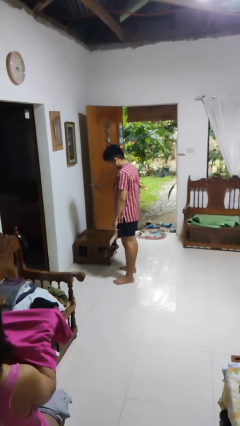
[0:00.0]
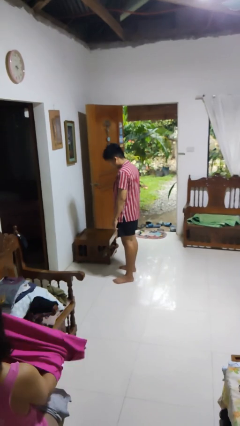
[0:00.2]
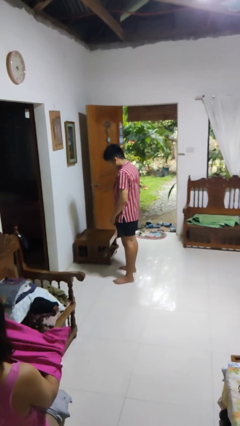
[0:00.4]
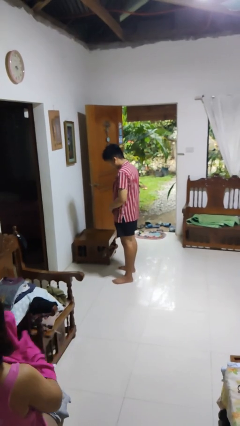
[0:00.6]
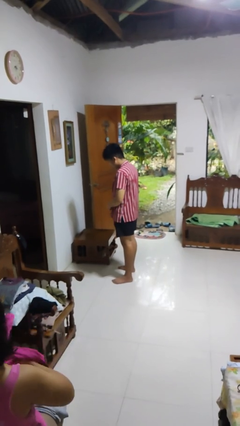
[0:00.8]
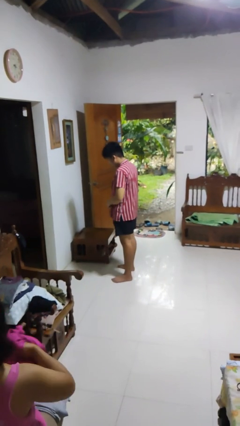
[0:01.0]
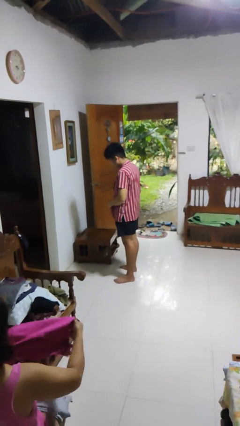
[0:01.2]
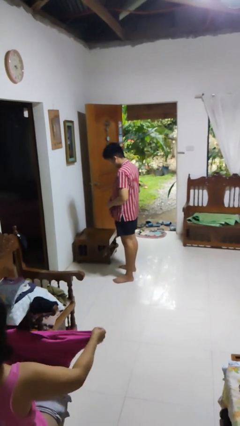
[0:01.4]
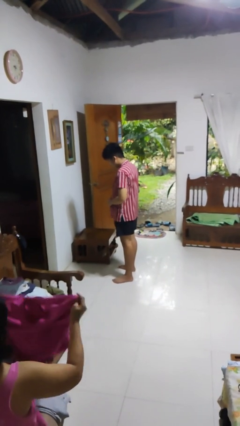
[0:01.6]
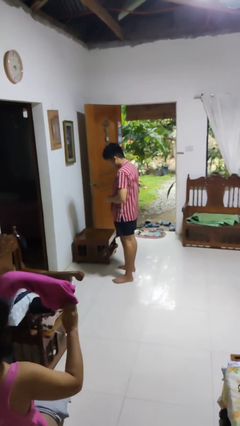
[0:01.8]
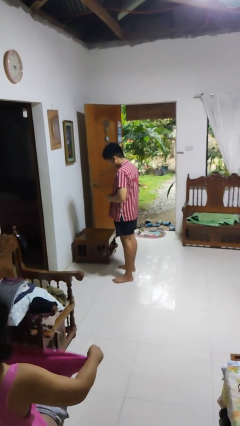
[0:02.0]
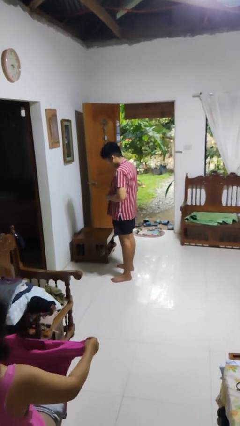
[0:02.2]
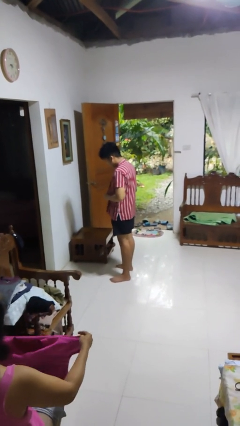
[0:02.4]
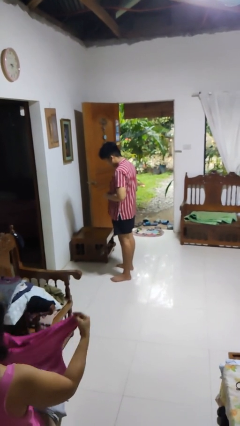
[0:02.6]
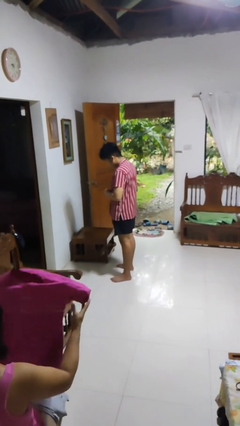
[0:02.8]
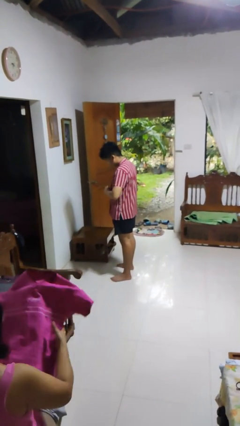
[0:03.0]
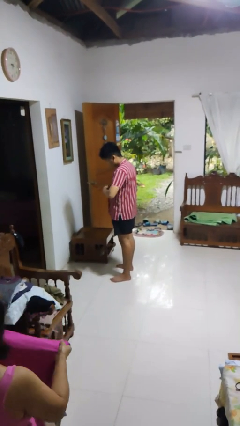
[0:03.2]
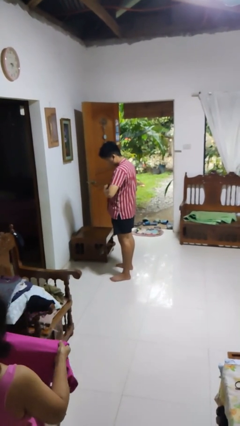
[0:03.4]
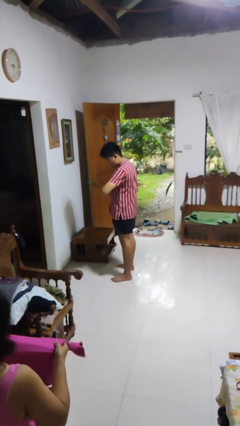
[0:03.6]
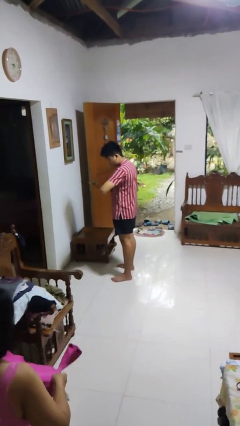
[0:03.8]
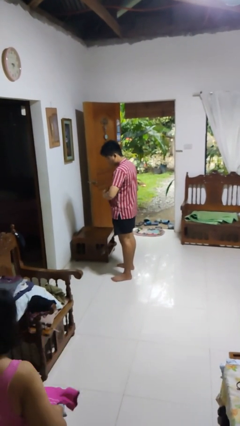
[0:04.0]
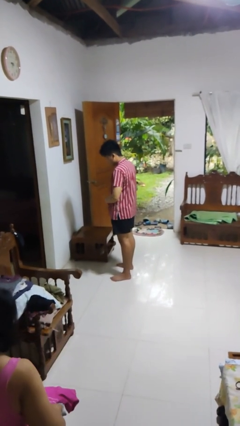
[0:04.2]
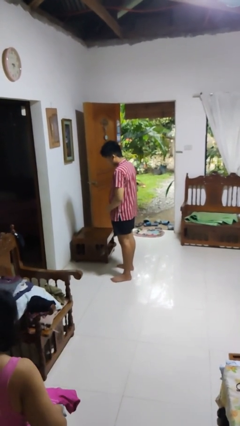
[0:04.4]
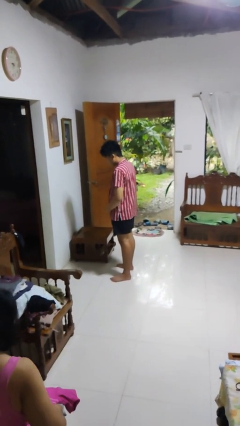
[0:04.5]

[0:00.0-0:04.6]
person unbuttons shirt

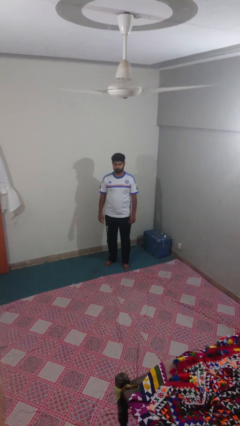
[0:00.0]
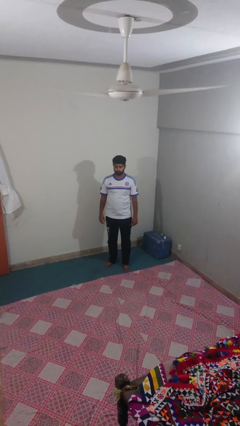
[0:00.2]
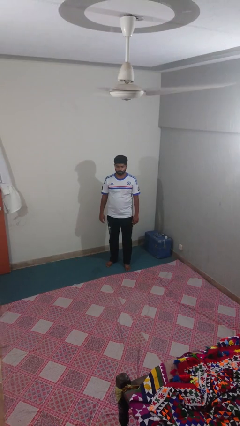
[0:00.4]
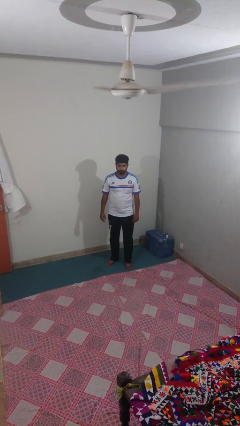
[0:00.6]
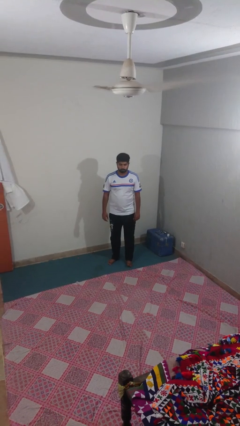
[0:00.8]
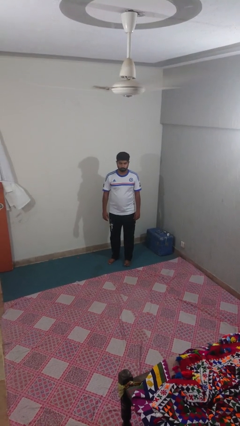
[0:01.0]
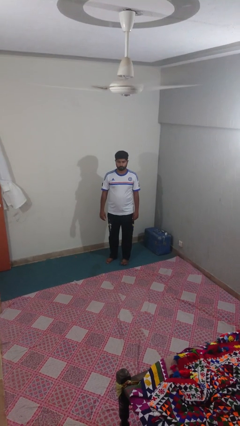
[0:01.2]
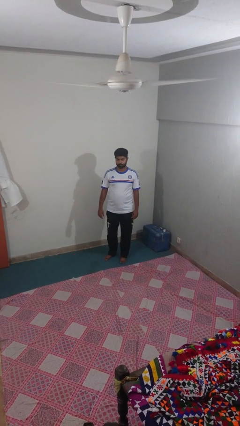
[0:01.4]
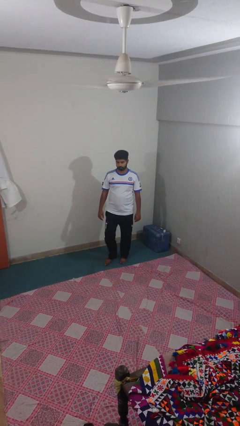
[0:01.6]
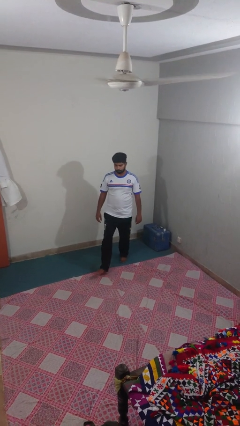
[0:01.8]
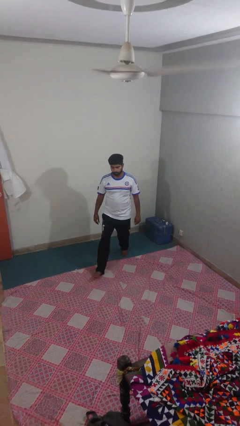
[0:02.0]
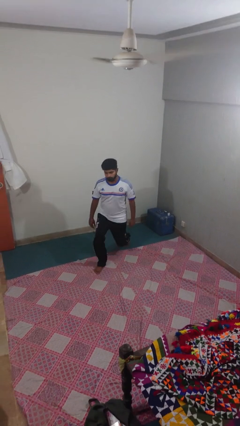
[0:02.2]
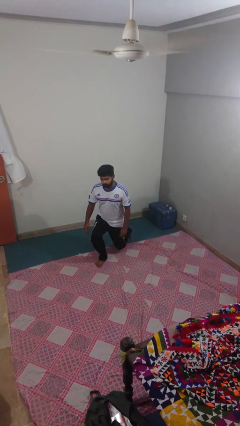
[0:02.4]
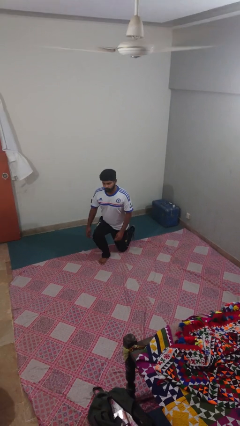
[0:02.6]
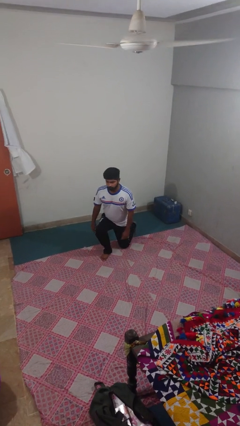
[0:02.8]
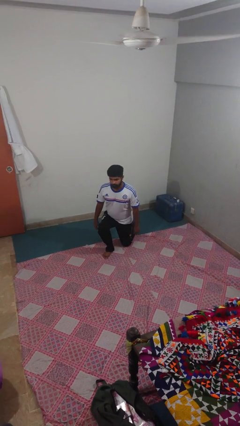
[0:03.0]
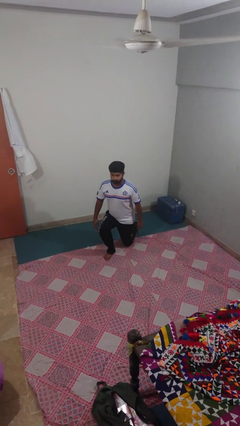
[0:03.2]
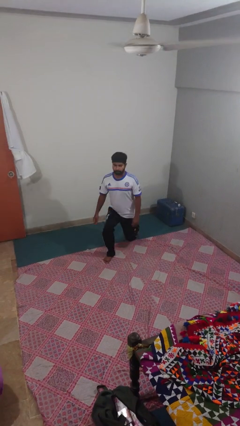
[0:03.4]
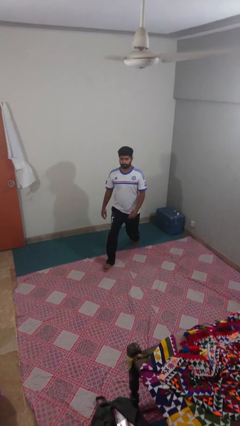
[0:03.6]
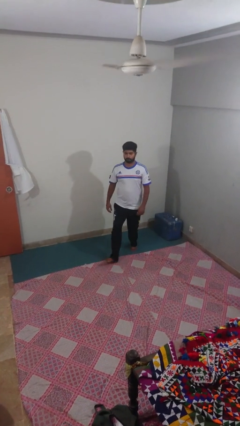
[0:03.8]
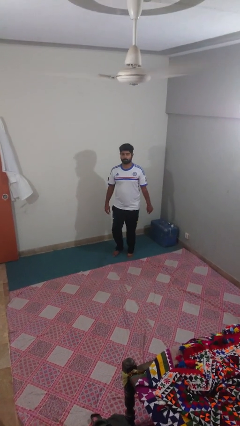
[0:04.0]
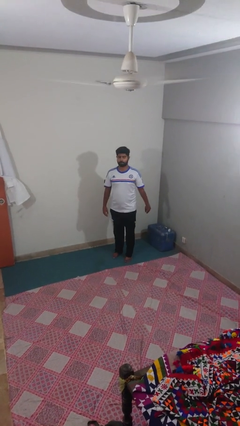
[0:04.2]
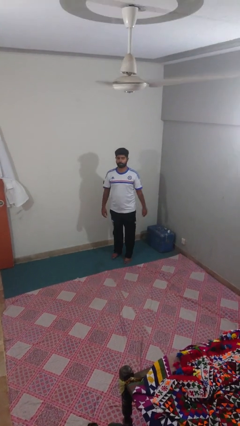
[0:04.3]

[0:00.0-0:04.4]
person exercises with lunges

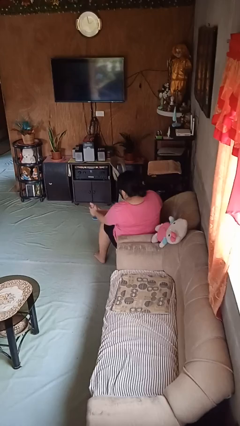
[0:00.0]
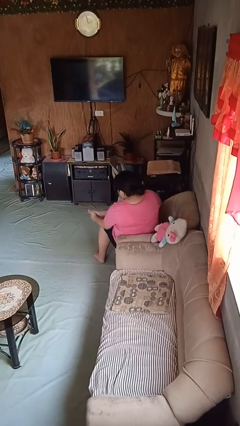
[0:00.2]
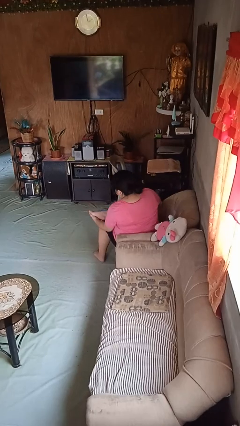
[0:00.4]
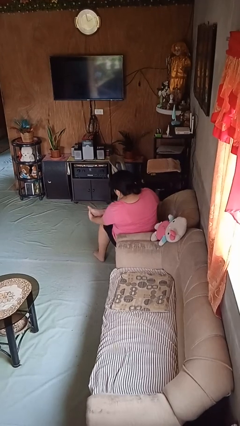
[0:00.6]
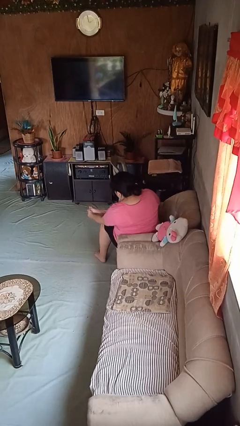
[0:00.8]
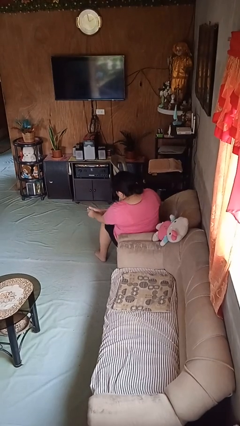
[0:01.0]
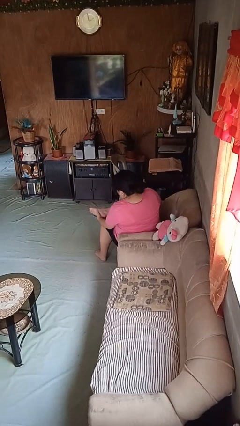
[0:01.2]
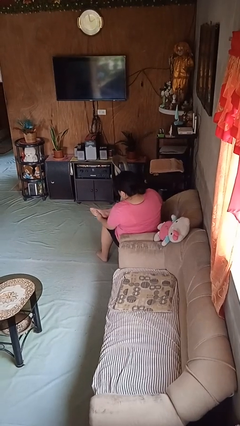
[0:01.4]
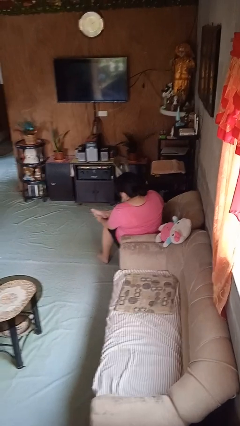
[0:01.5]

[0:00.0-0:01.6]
person rubs foot

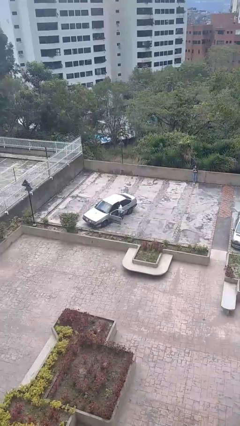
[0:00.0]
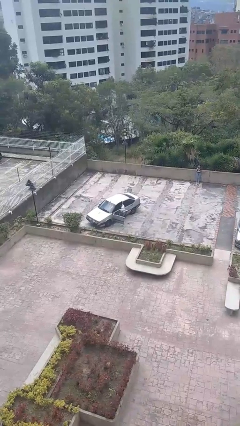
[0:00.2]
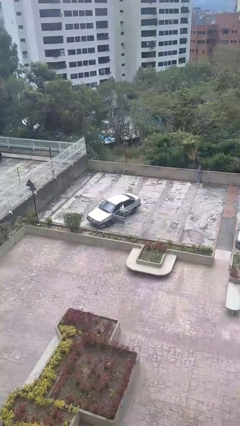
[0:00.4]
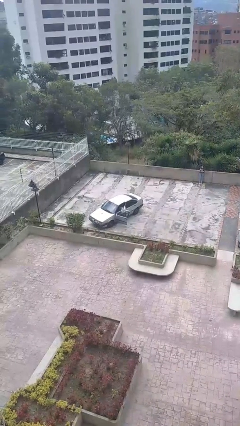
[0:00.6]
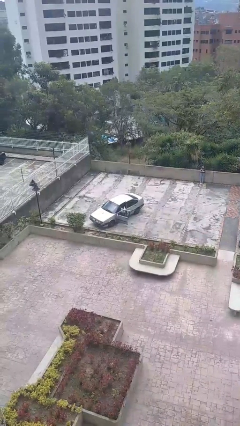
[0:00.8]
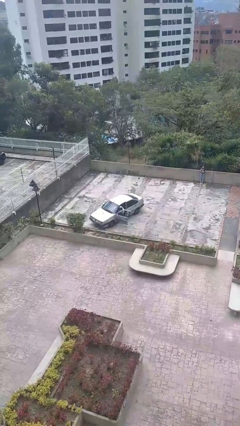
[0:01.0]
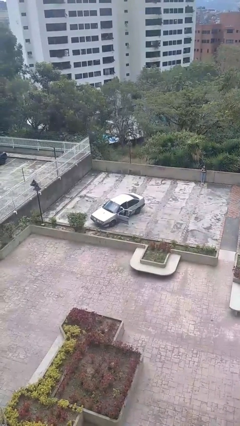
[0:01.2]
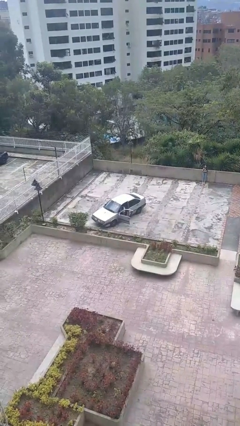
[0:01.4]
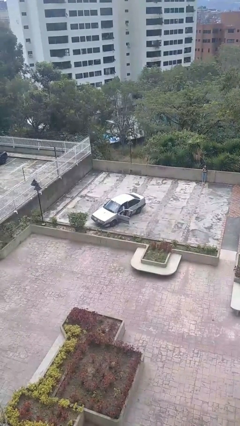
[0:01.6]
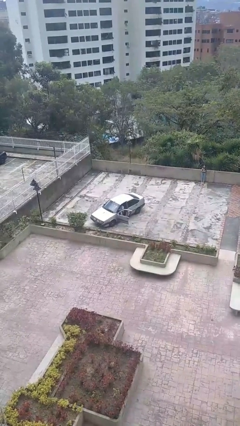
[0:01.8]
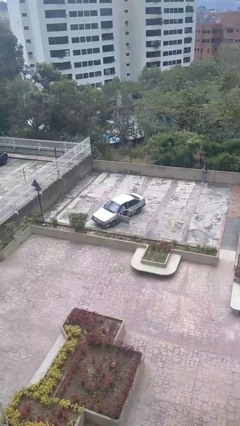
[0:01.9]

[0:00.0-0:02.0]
person enters car

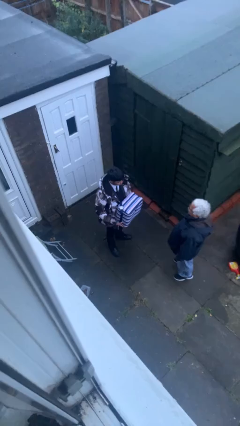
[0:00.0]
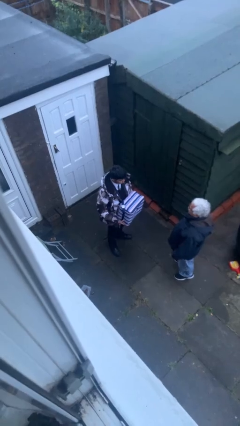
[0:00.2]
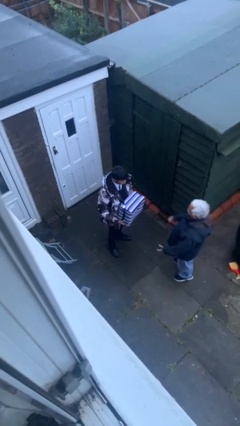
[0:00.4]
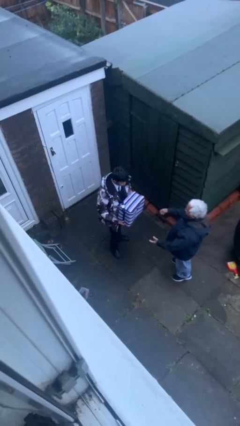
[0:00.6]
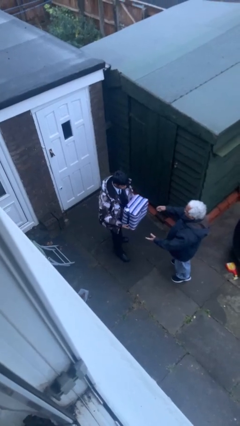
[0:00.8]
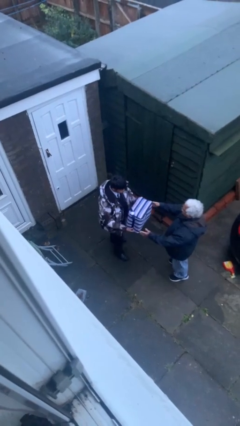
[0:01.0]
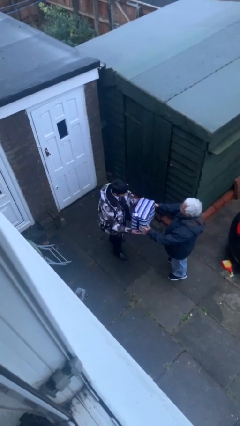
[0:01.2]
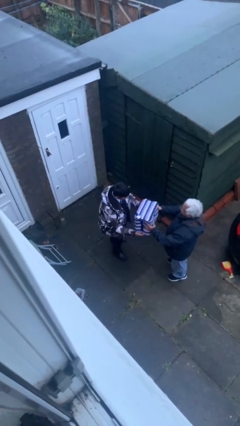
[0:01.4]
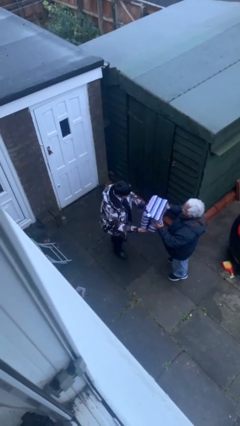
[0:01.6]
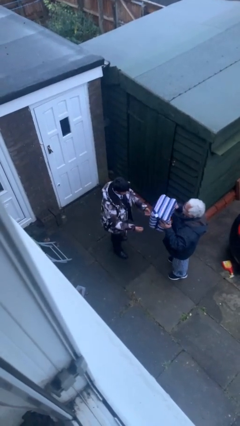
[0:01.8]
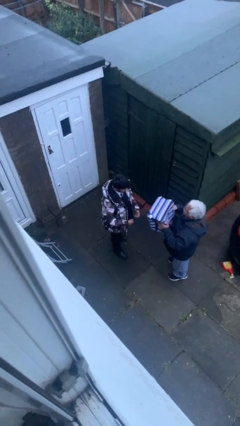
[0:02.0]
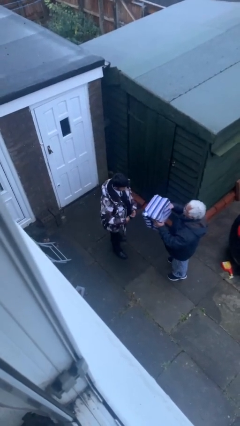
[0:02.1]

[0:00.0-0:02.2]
person transfers object to person

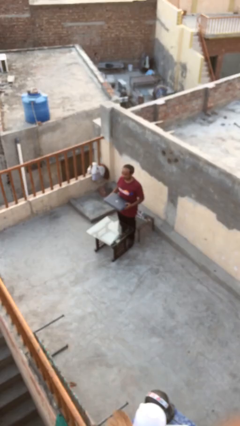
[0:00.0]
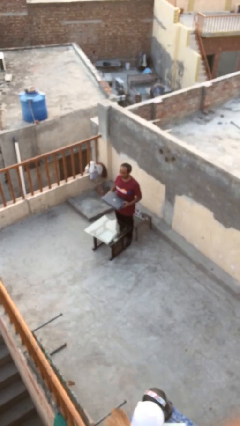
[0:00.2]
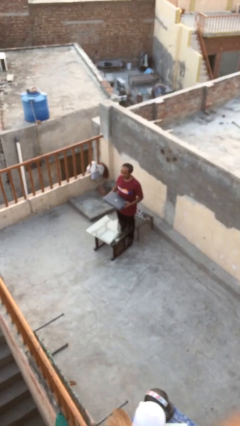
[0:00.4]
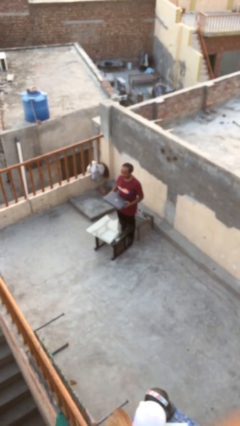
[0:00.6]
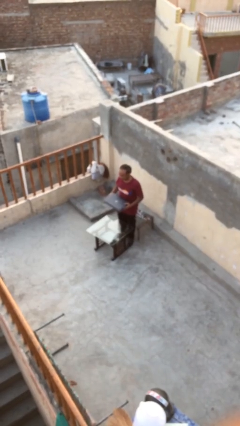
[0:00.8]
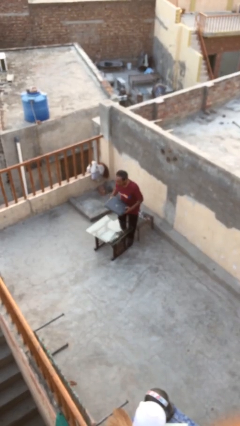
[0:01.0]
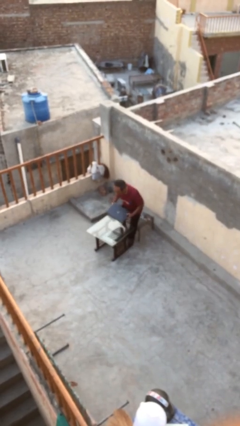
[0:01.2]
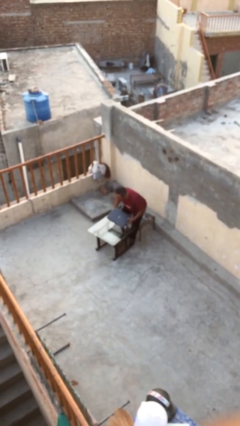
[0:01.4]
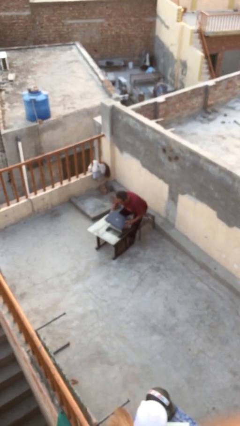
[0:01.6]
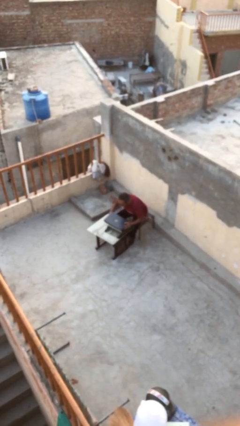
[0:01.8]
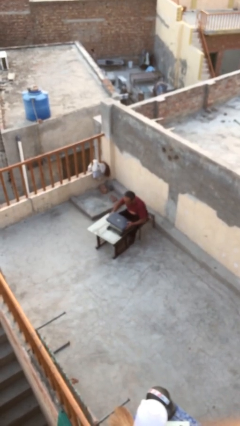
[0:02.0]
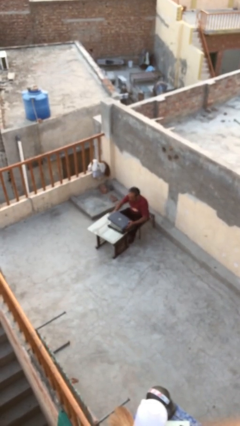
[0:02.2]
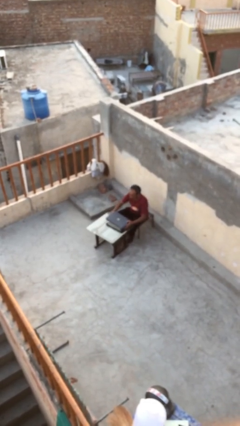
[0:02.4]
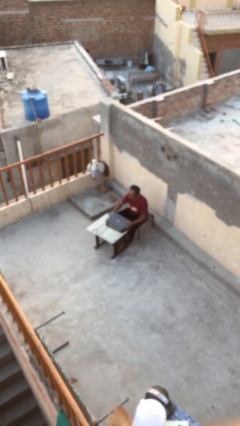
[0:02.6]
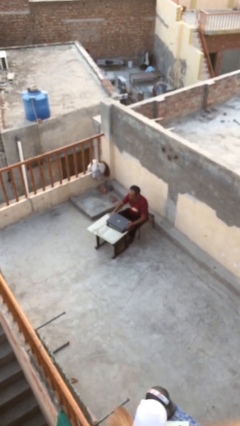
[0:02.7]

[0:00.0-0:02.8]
person sits down
